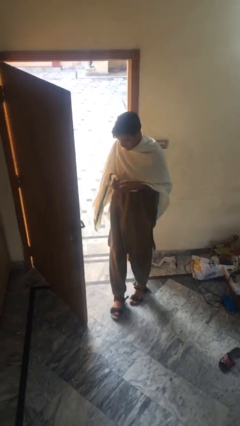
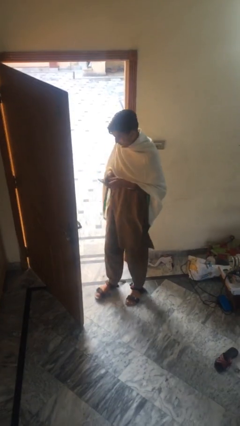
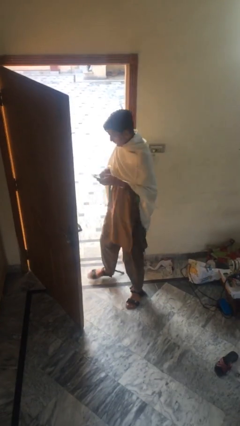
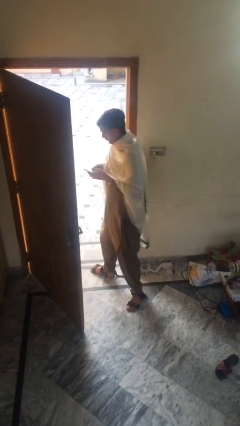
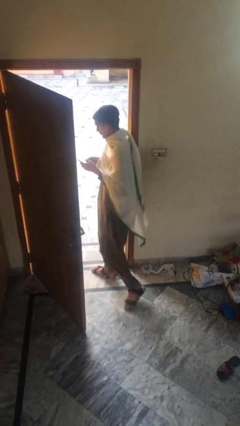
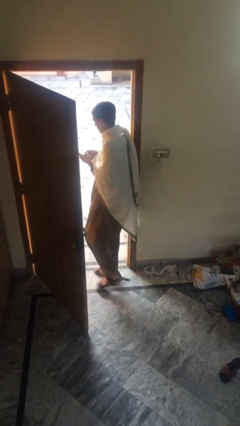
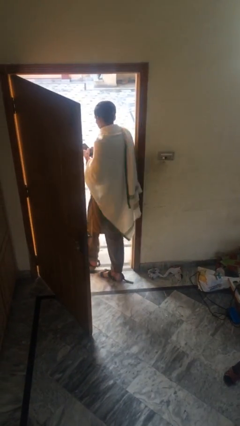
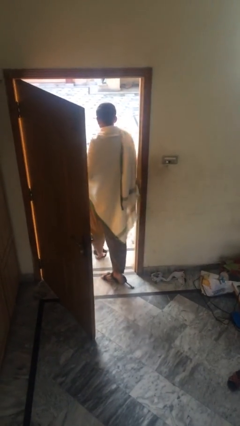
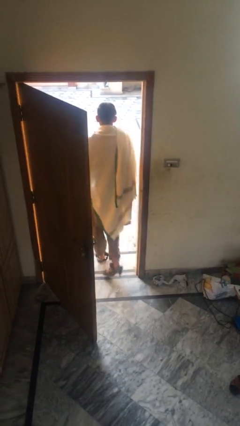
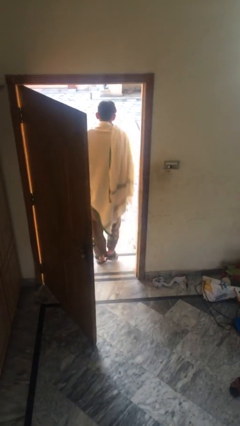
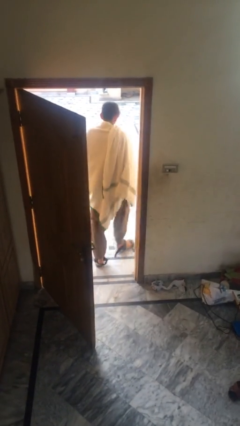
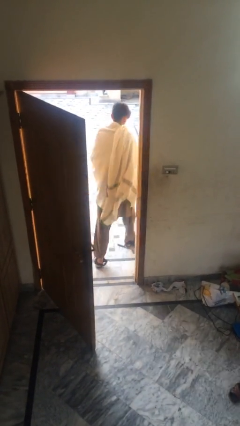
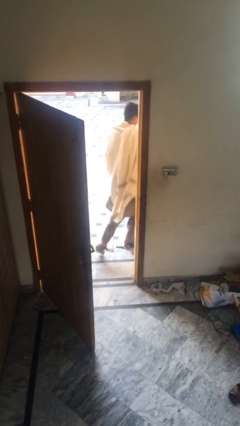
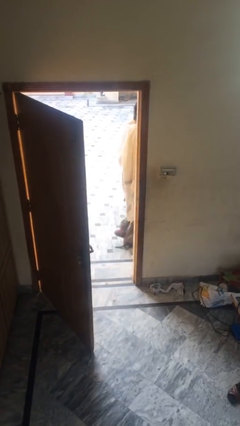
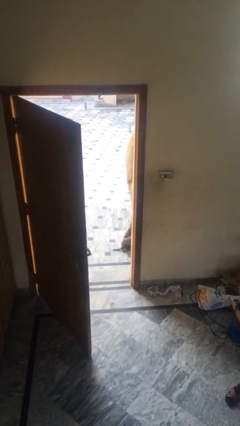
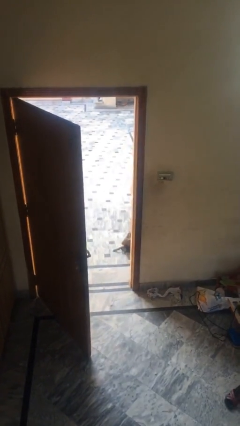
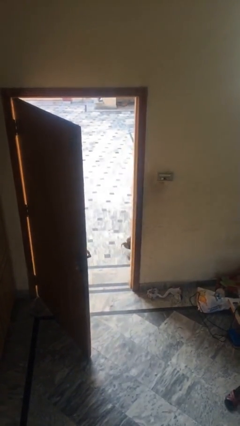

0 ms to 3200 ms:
person exits scene through structure

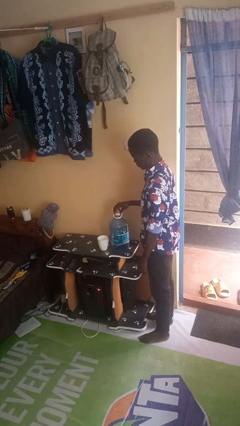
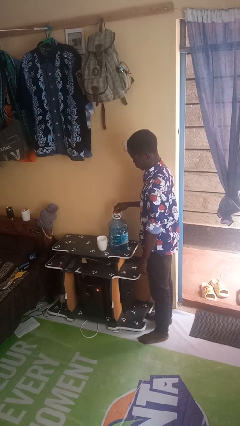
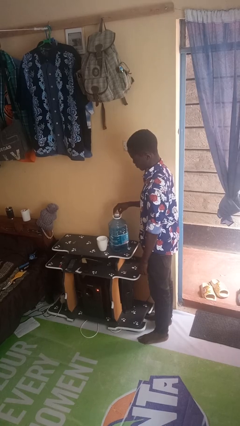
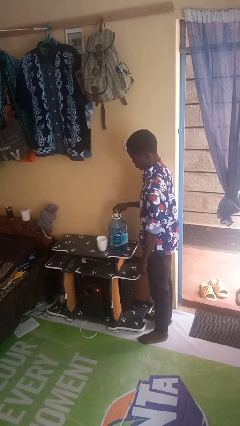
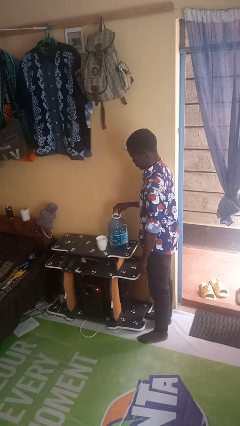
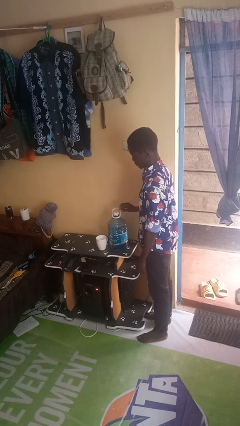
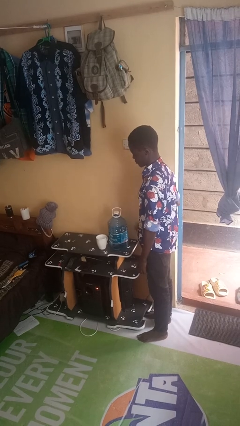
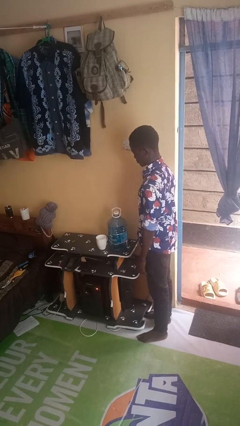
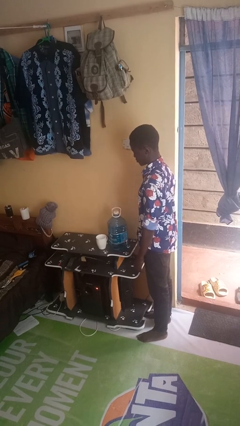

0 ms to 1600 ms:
person screws lid to bottle

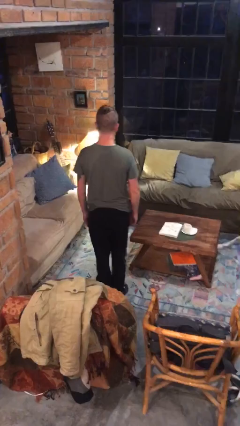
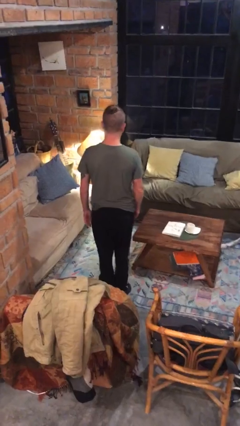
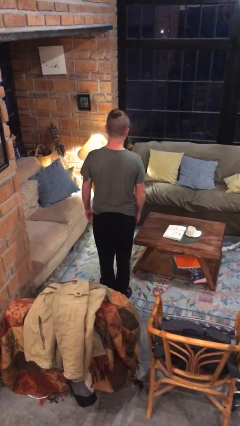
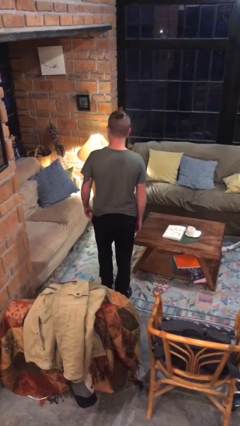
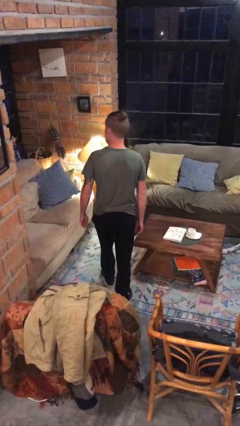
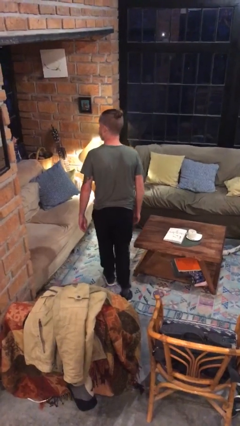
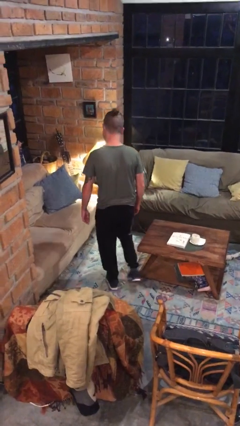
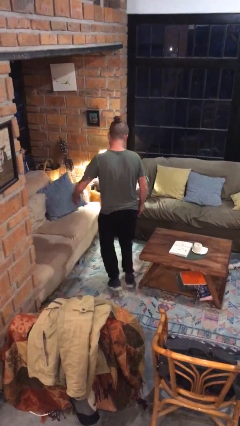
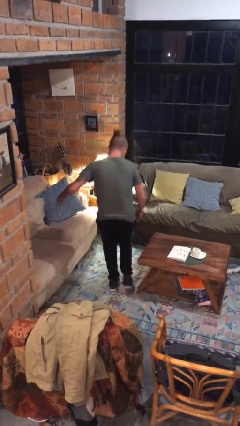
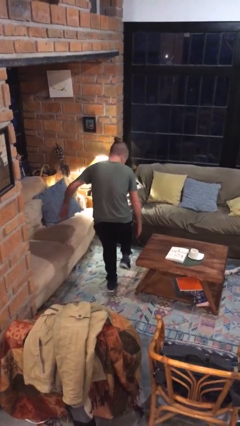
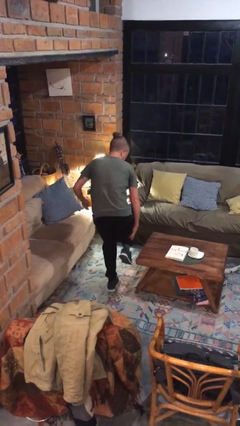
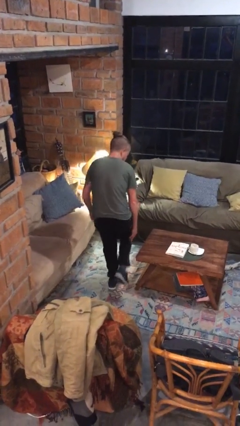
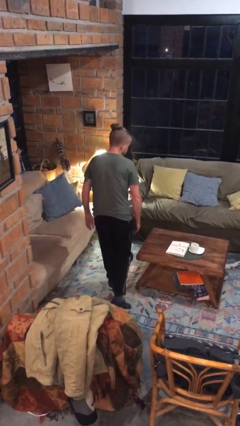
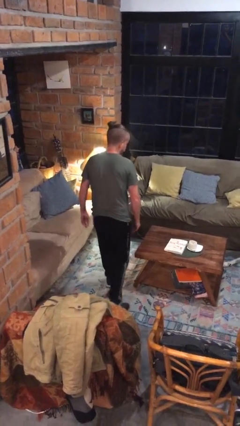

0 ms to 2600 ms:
person bumps into table

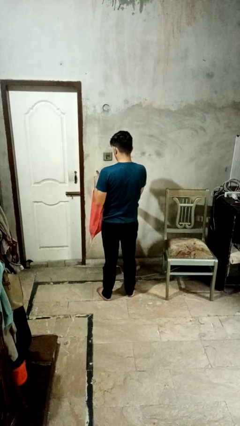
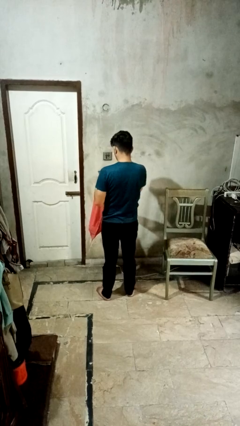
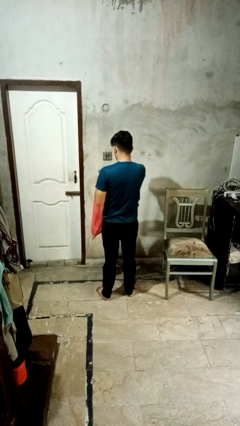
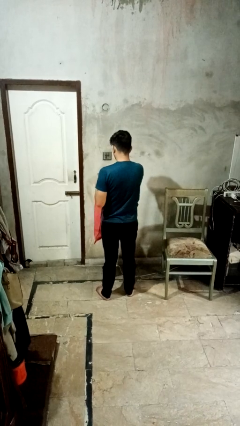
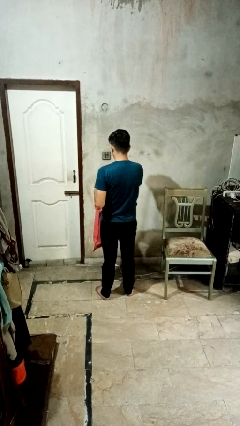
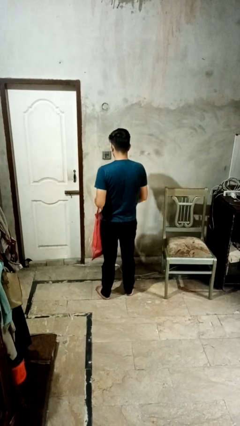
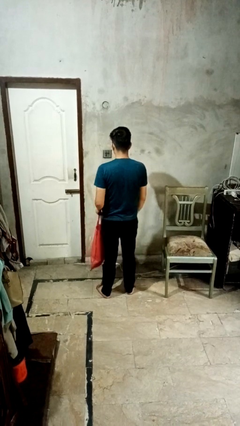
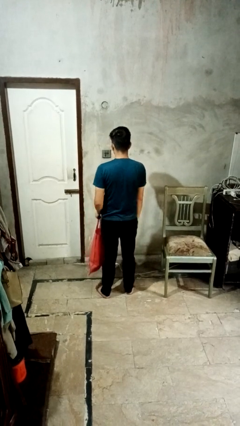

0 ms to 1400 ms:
person puts object into bag

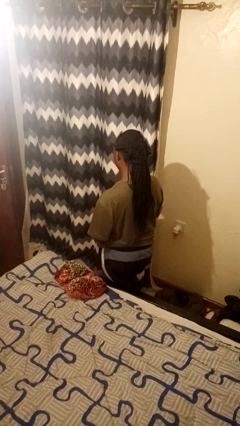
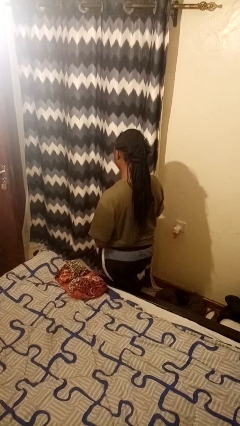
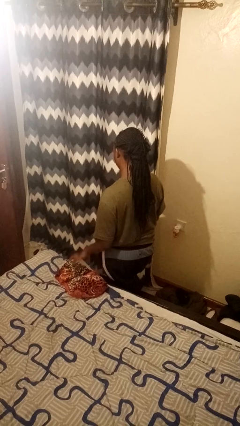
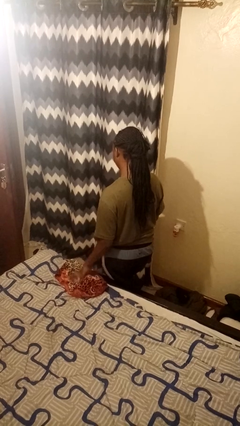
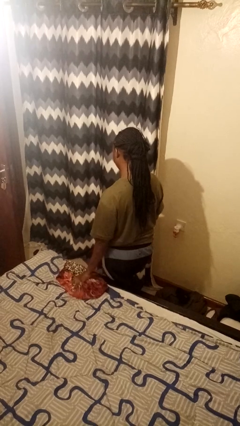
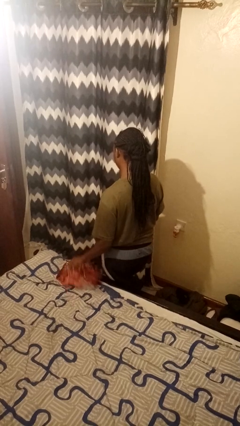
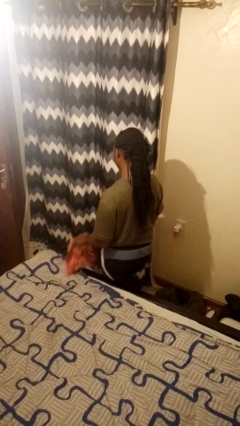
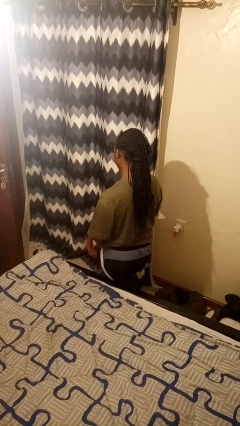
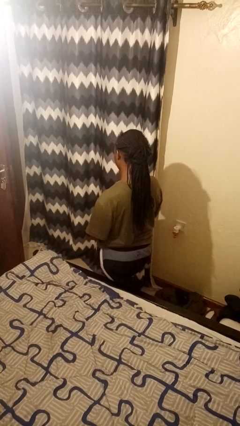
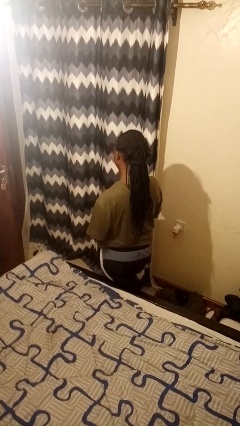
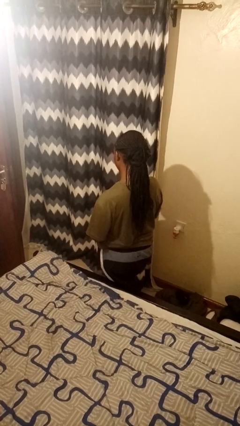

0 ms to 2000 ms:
person picks up object from bed

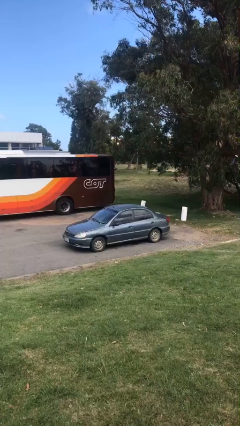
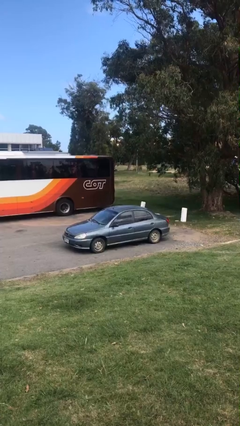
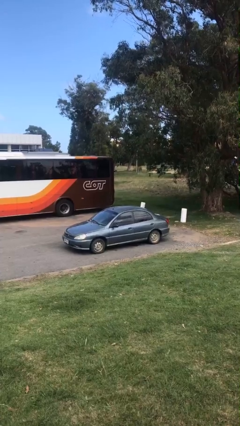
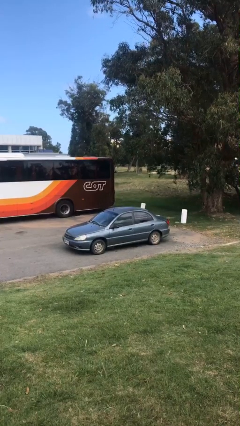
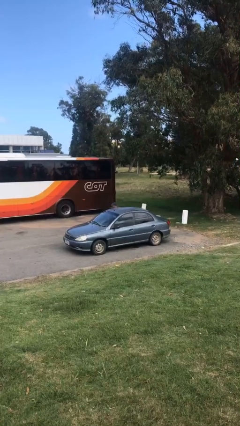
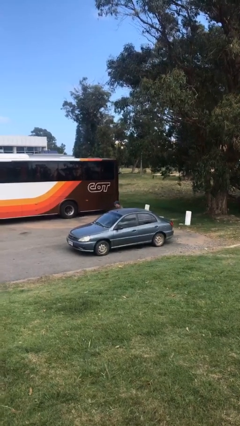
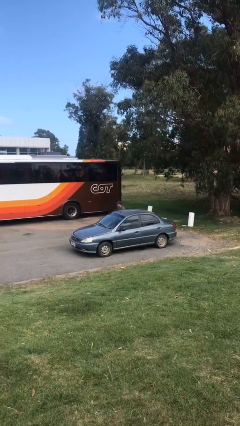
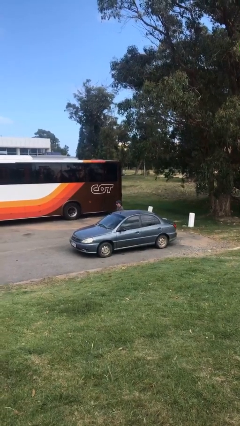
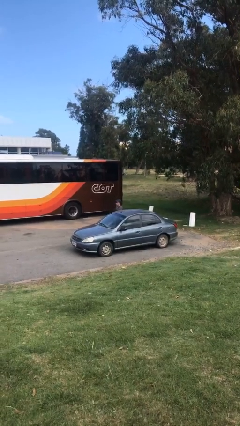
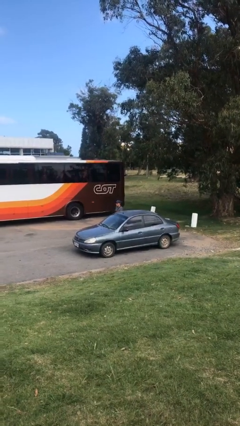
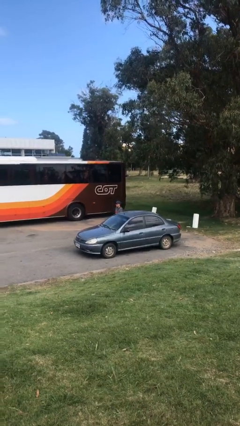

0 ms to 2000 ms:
person exits car

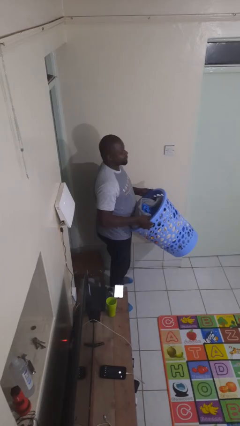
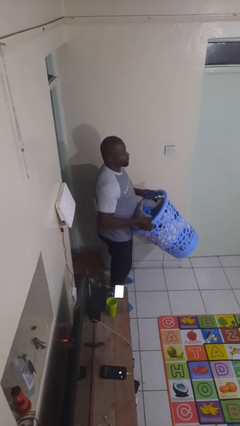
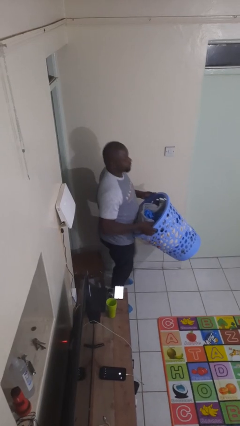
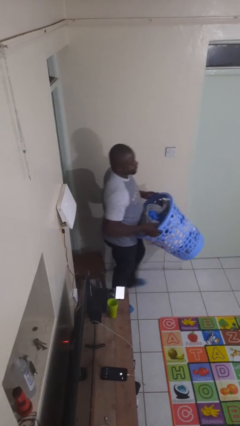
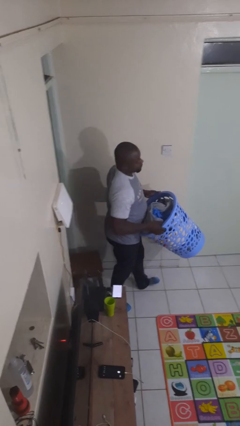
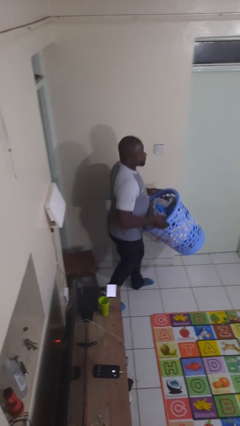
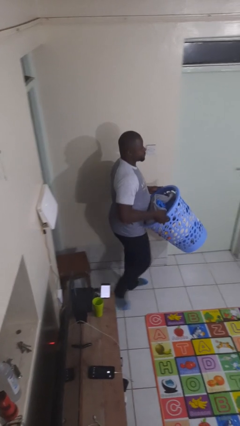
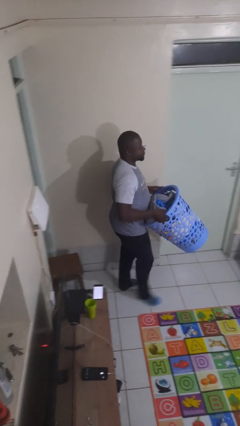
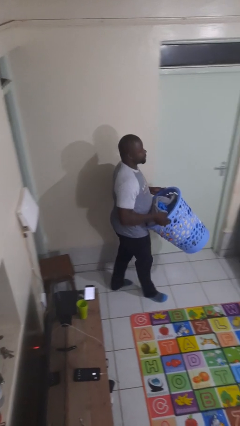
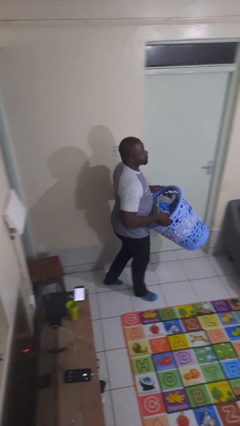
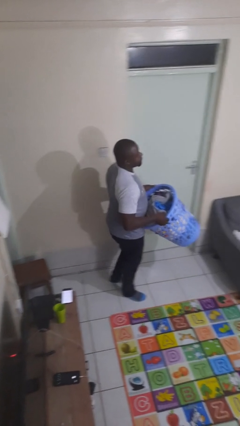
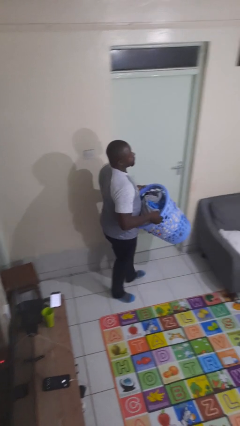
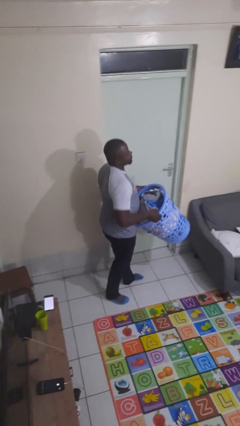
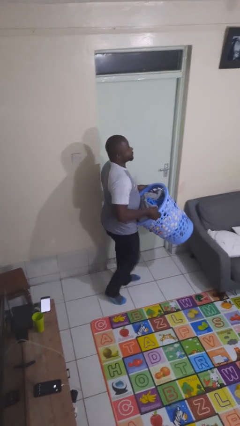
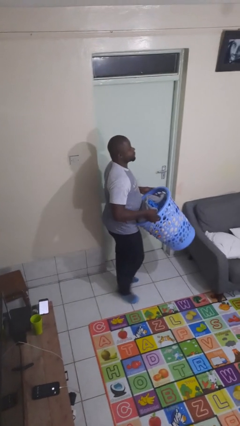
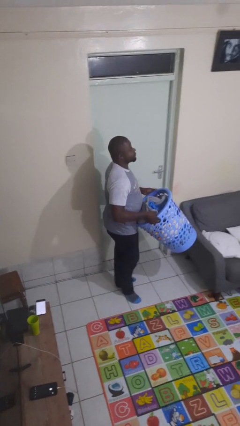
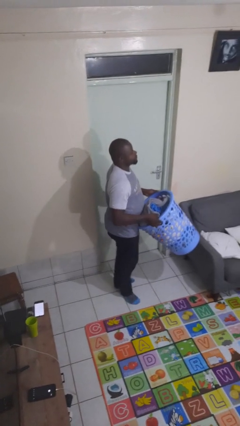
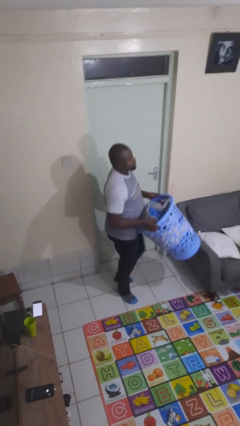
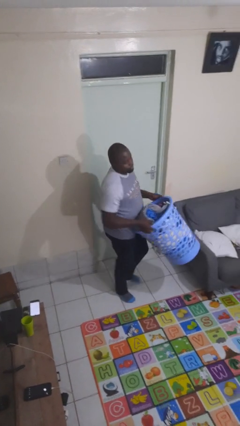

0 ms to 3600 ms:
person carries laundry basket

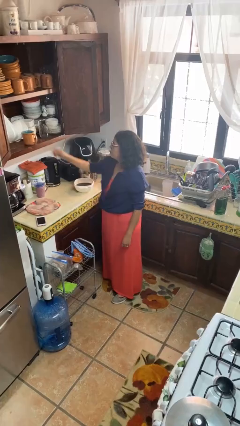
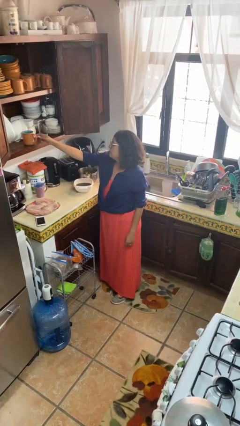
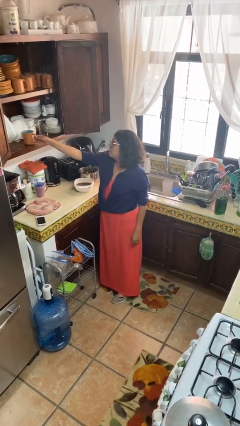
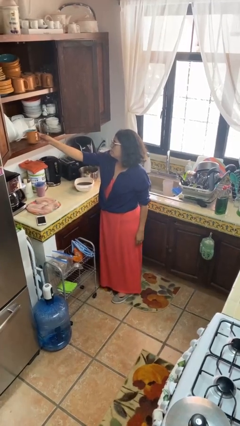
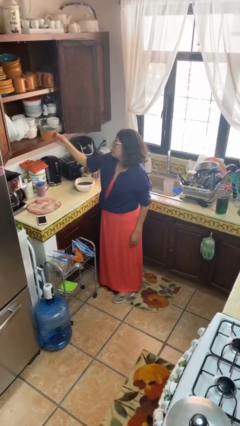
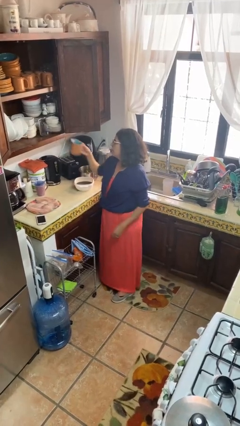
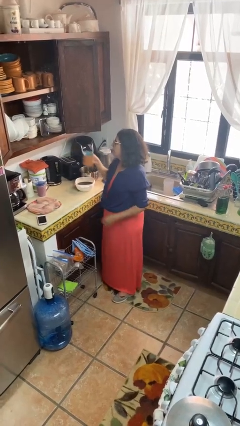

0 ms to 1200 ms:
person picks up object from cabinet
